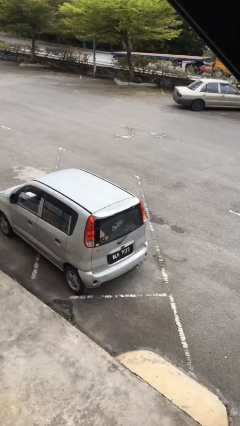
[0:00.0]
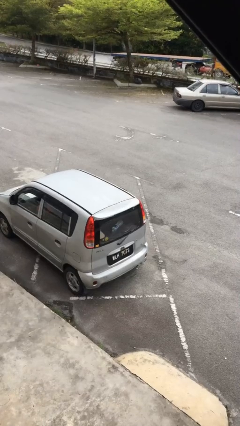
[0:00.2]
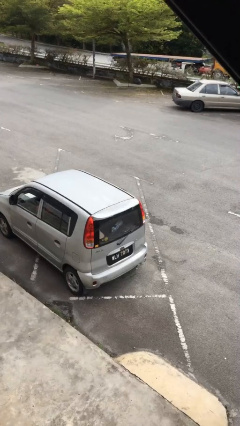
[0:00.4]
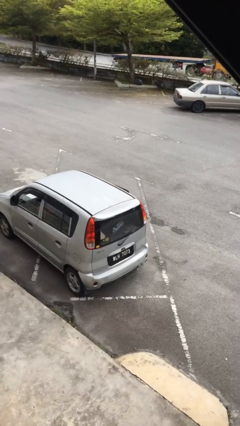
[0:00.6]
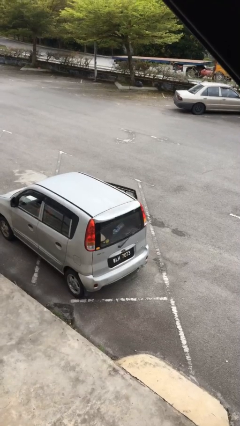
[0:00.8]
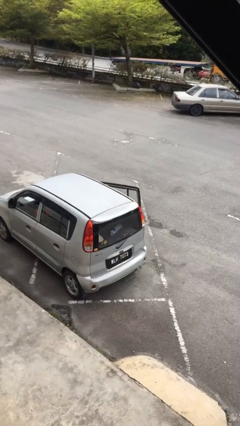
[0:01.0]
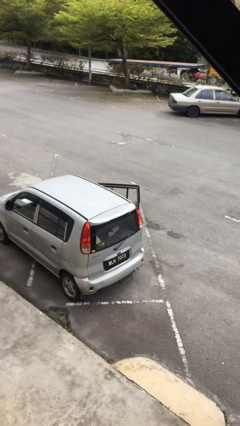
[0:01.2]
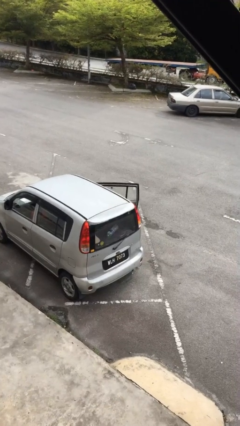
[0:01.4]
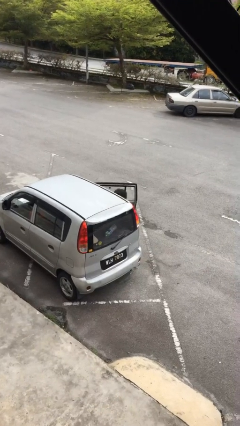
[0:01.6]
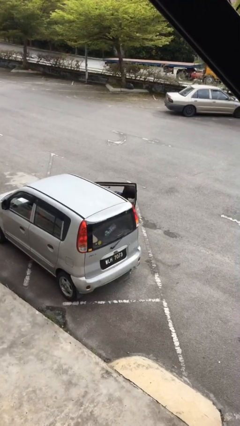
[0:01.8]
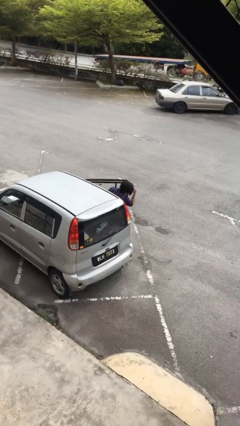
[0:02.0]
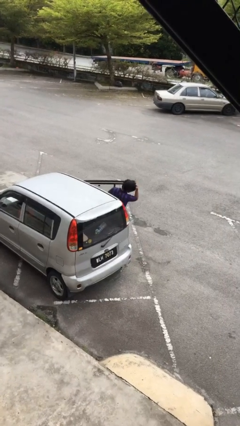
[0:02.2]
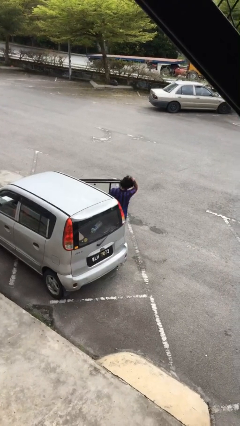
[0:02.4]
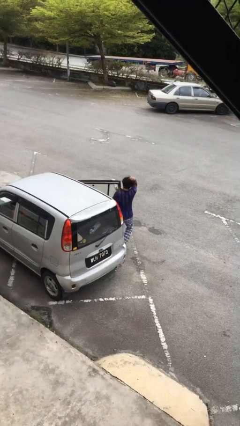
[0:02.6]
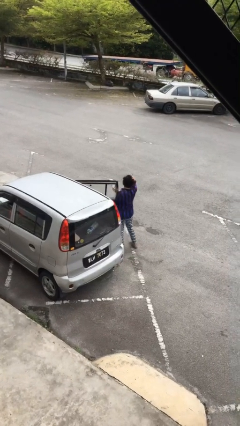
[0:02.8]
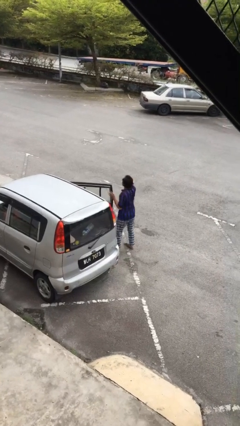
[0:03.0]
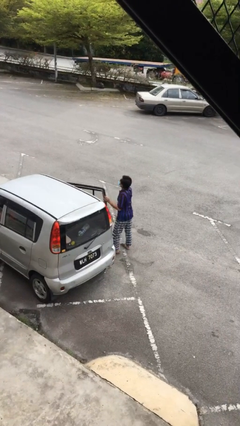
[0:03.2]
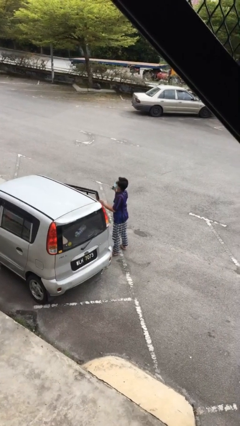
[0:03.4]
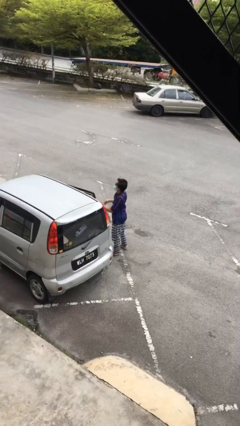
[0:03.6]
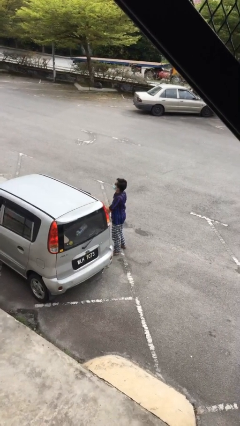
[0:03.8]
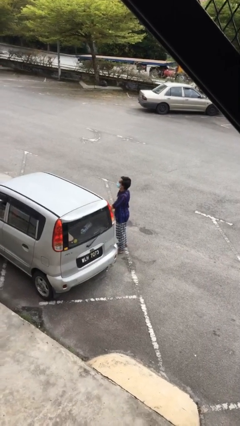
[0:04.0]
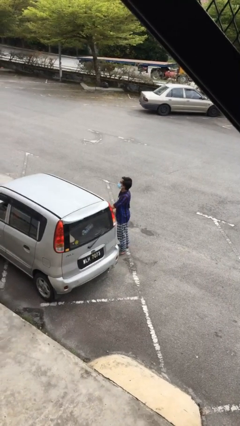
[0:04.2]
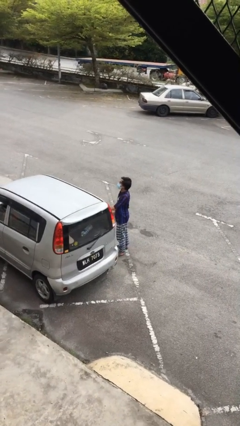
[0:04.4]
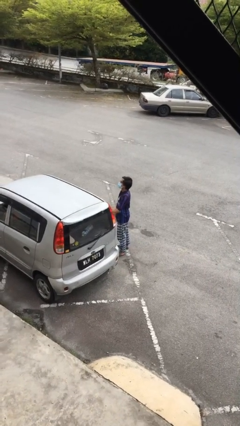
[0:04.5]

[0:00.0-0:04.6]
person exits car

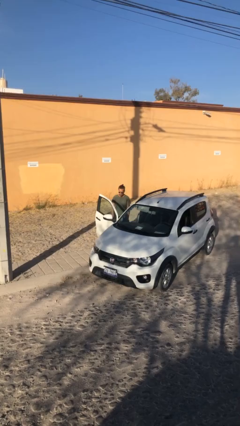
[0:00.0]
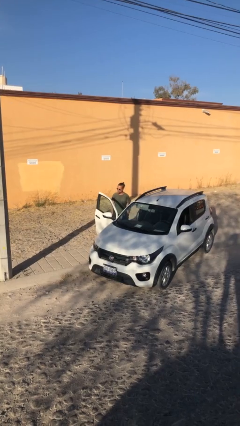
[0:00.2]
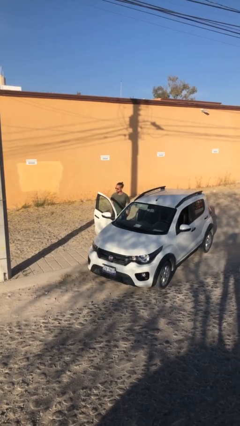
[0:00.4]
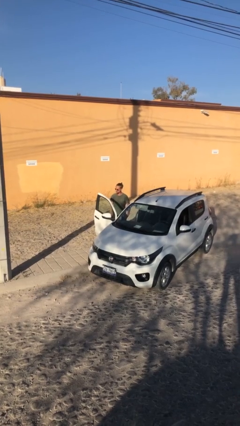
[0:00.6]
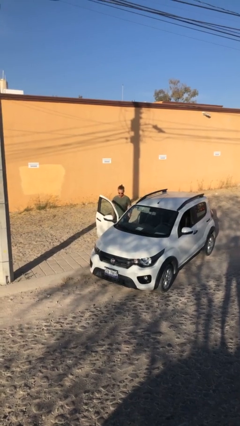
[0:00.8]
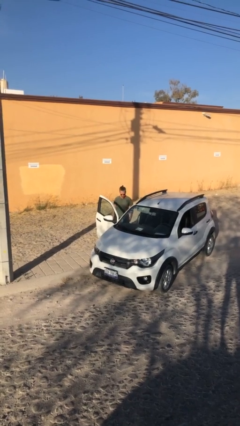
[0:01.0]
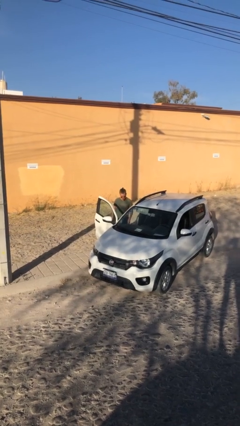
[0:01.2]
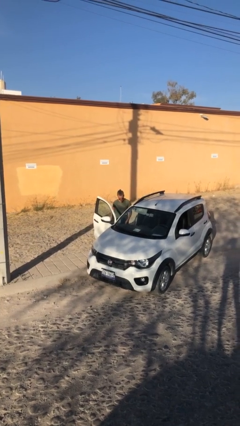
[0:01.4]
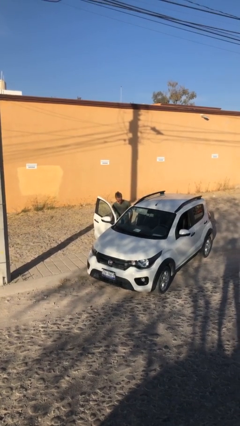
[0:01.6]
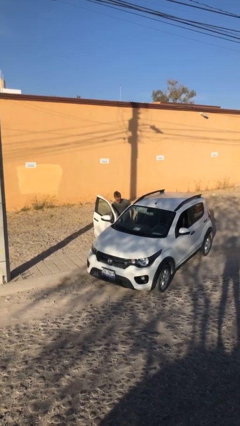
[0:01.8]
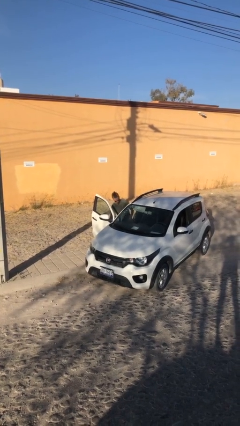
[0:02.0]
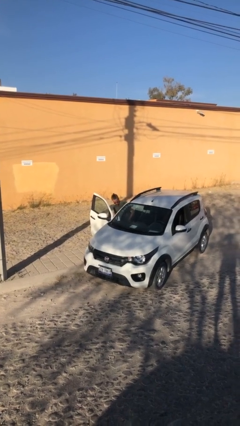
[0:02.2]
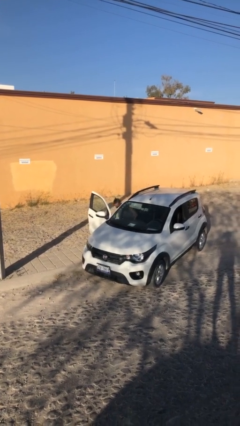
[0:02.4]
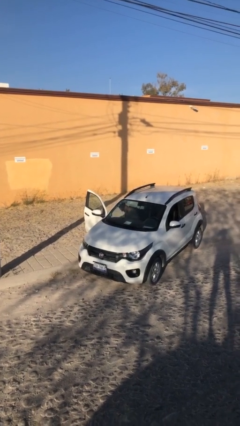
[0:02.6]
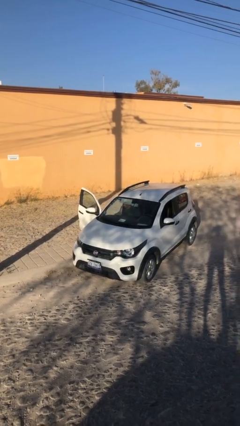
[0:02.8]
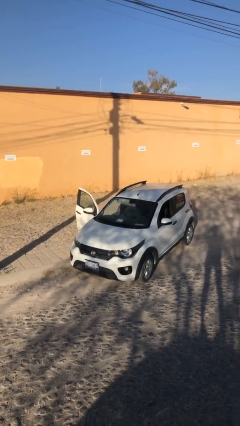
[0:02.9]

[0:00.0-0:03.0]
person enters car

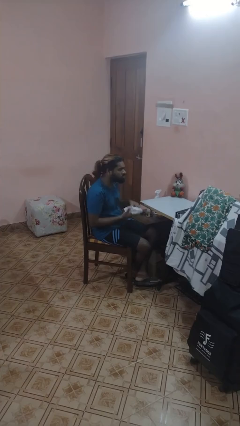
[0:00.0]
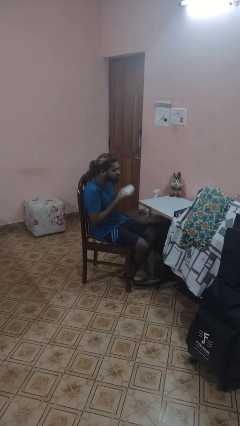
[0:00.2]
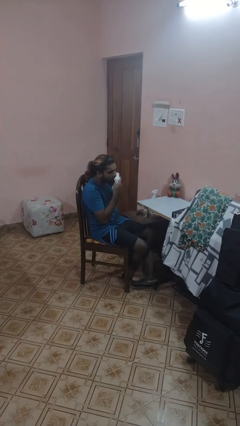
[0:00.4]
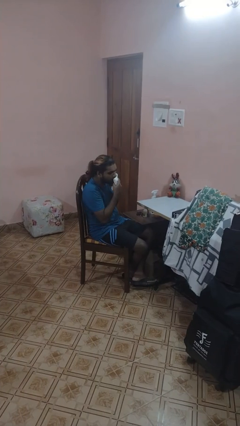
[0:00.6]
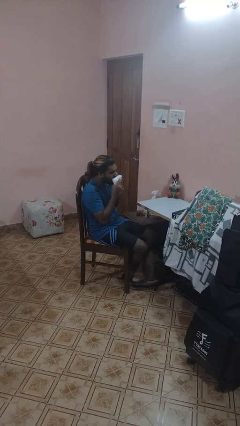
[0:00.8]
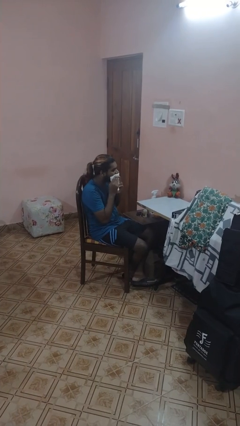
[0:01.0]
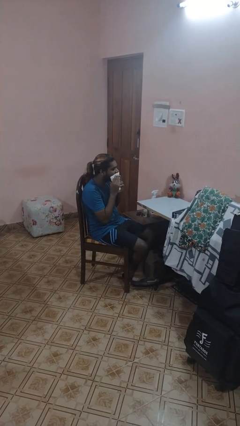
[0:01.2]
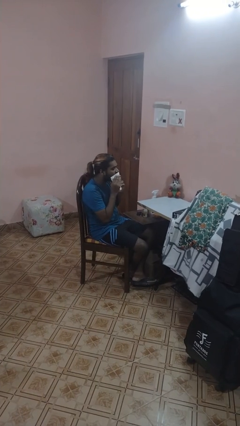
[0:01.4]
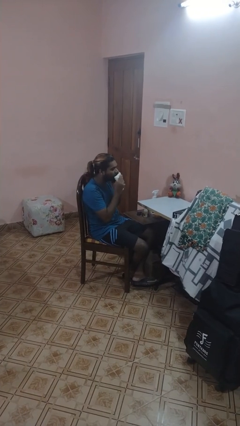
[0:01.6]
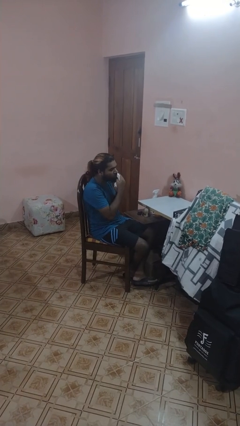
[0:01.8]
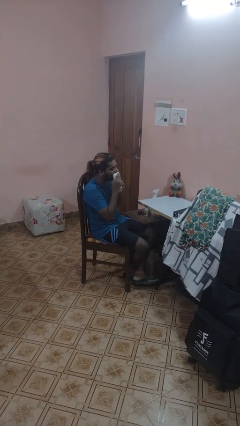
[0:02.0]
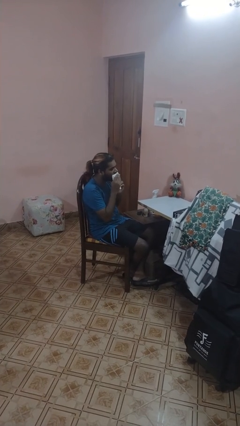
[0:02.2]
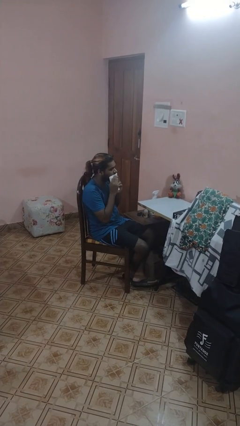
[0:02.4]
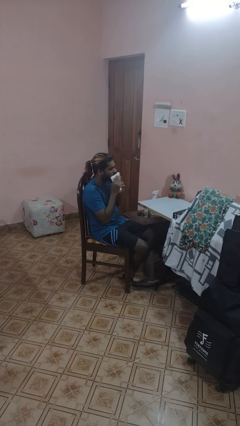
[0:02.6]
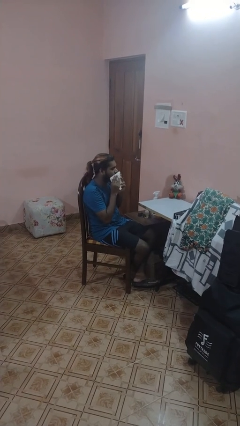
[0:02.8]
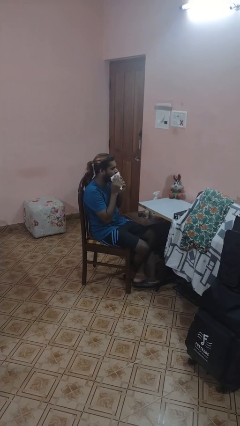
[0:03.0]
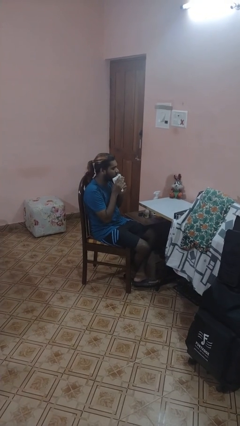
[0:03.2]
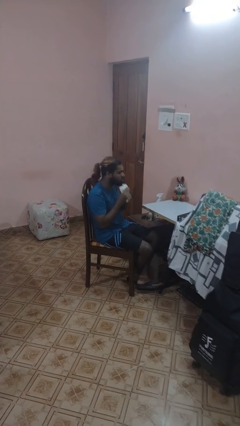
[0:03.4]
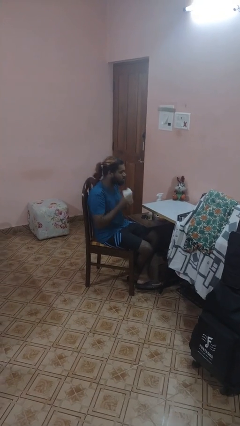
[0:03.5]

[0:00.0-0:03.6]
person wipes mouth with napkin

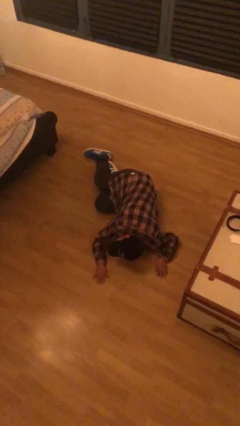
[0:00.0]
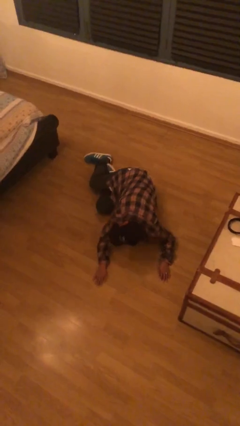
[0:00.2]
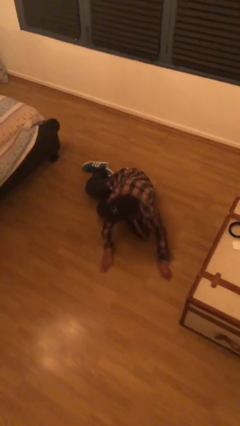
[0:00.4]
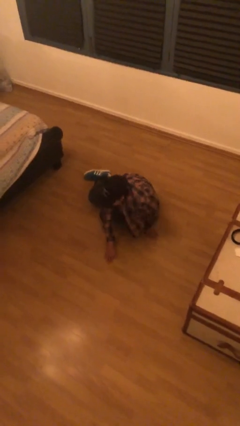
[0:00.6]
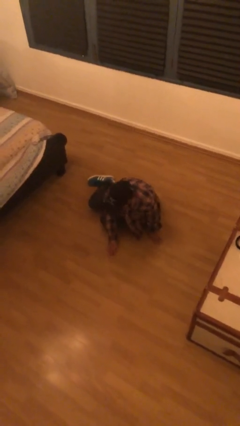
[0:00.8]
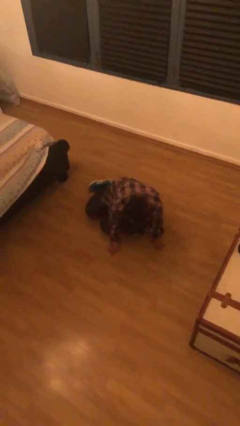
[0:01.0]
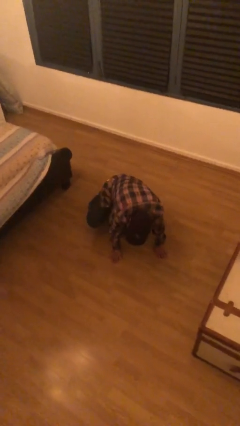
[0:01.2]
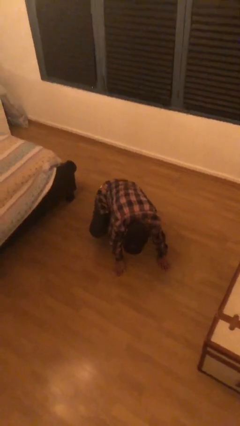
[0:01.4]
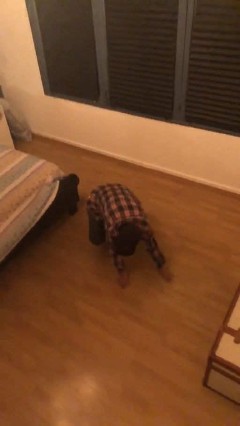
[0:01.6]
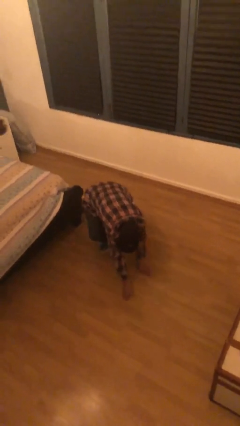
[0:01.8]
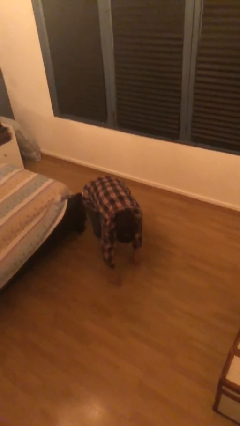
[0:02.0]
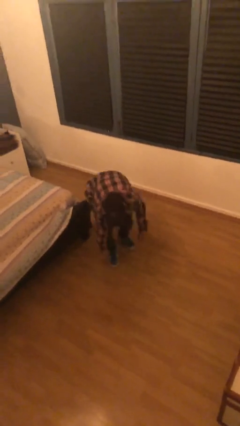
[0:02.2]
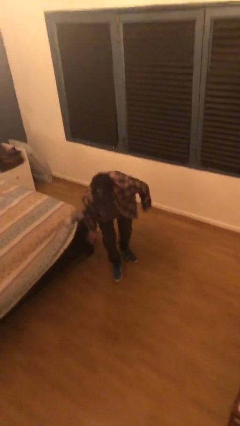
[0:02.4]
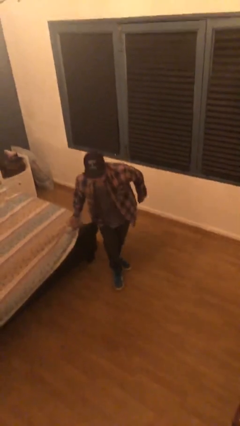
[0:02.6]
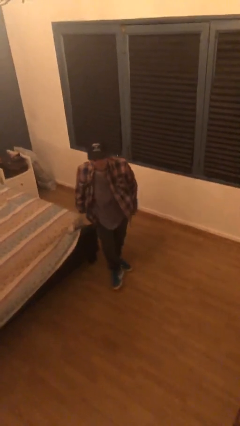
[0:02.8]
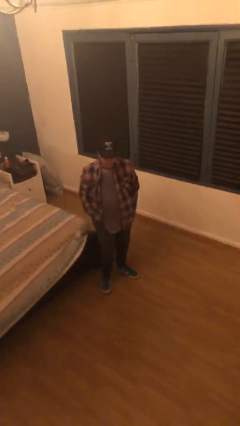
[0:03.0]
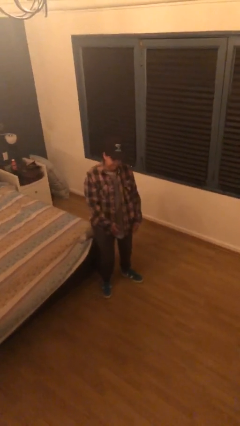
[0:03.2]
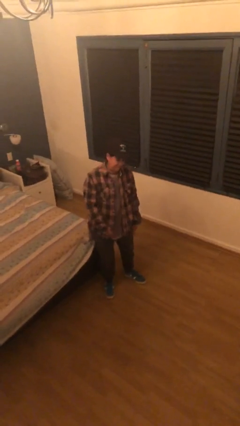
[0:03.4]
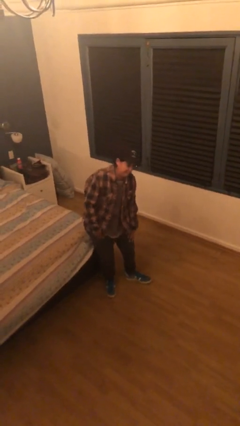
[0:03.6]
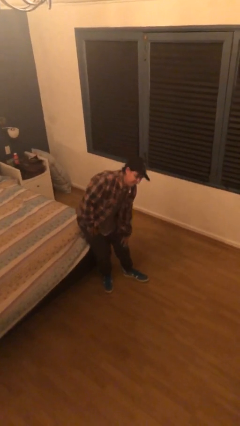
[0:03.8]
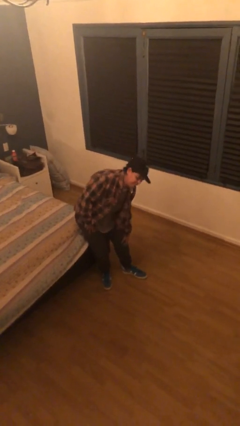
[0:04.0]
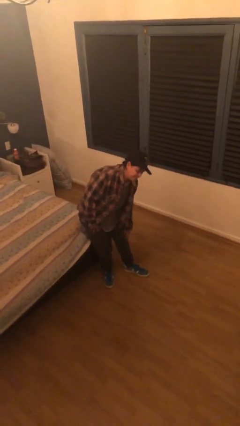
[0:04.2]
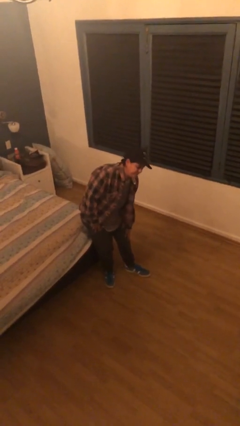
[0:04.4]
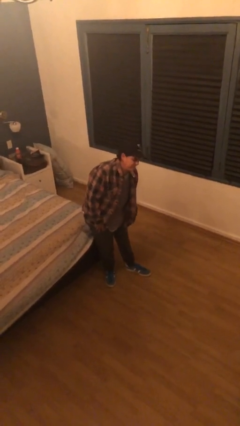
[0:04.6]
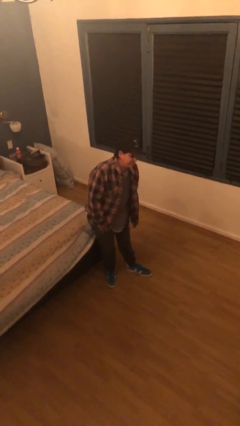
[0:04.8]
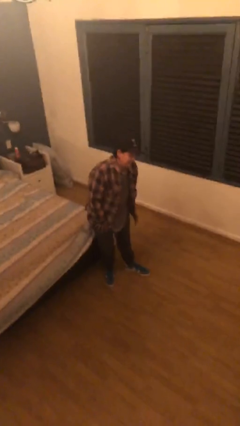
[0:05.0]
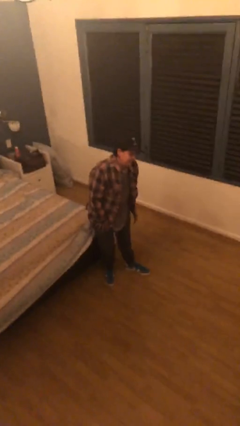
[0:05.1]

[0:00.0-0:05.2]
person stands up from floor

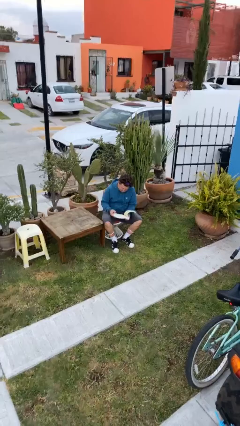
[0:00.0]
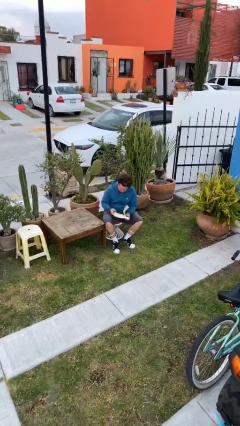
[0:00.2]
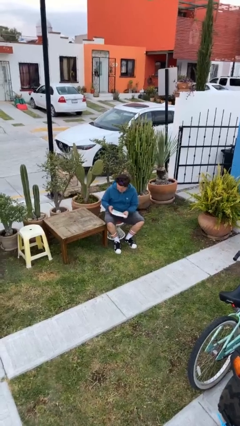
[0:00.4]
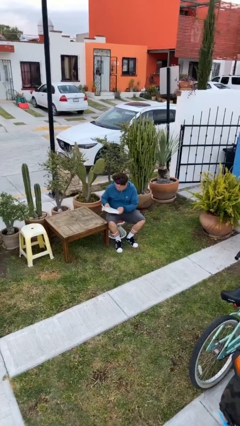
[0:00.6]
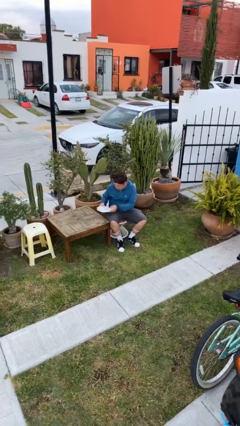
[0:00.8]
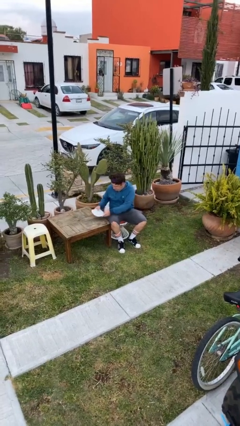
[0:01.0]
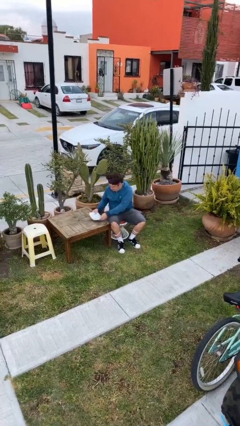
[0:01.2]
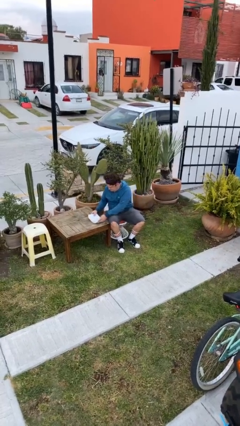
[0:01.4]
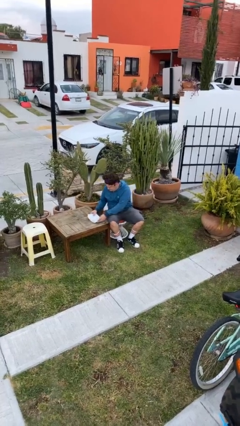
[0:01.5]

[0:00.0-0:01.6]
person puts down object on table
